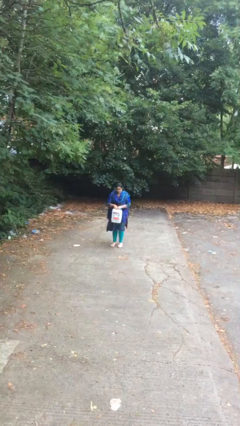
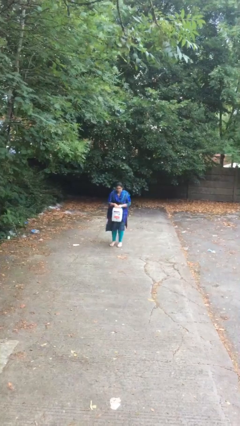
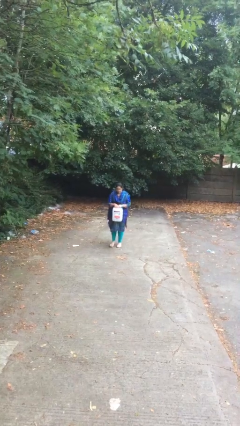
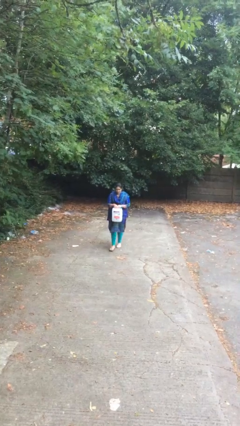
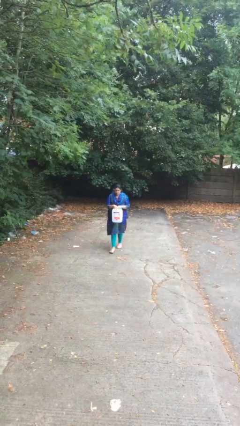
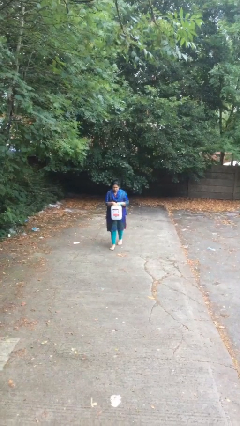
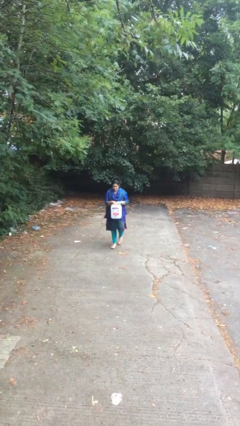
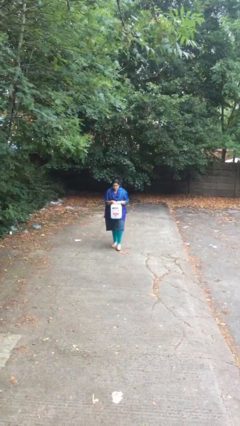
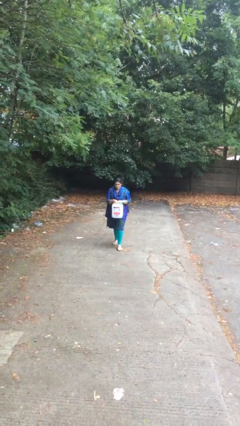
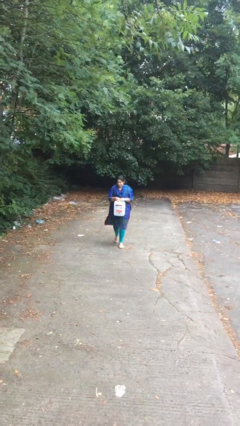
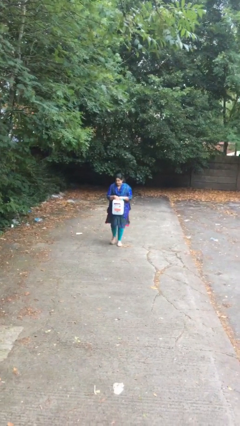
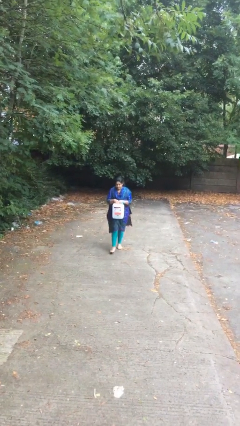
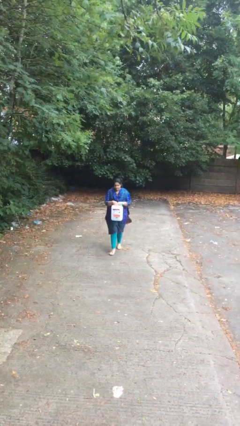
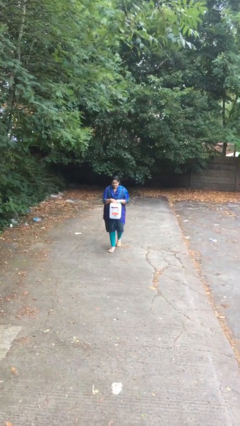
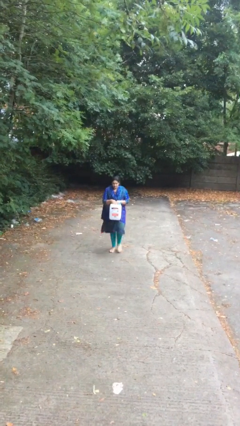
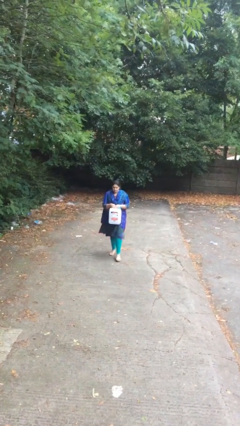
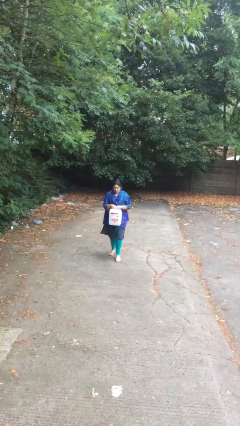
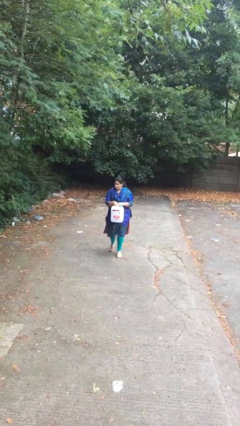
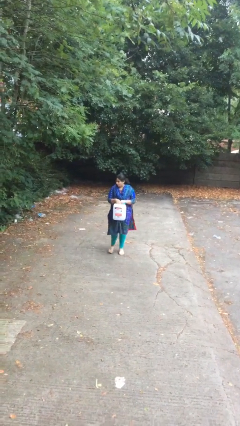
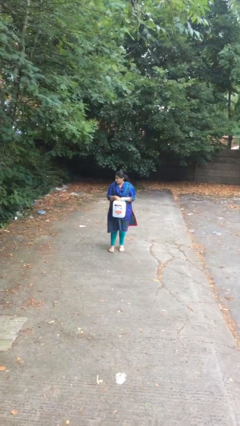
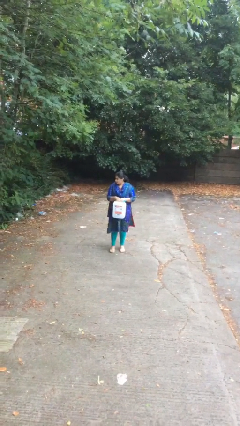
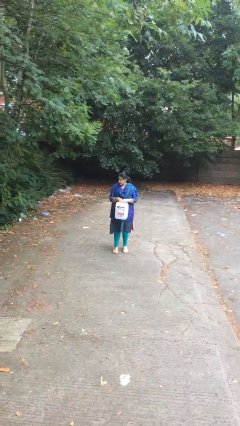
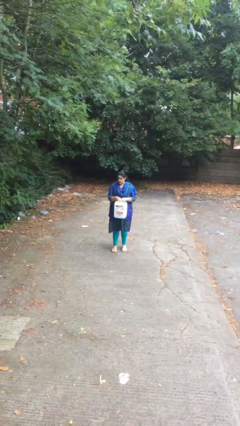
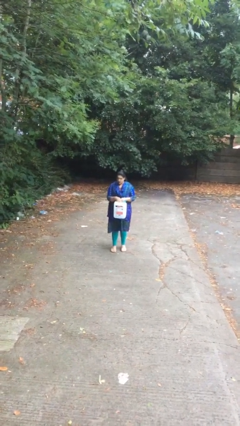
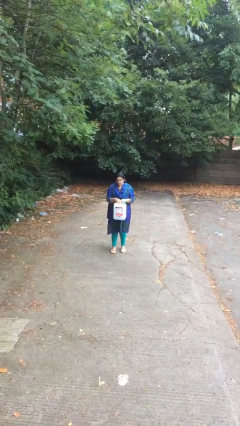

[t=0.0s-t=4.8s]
person carries heavy object

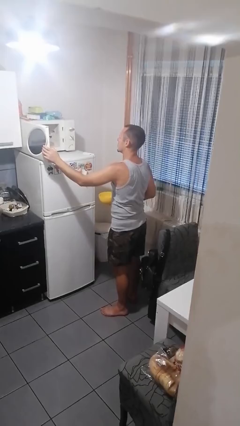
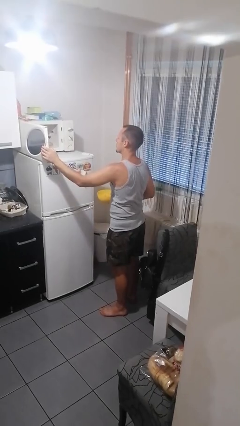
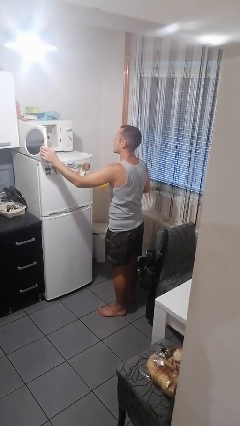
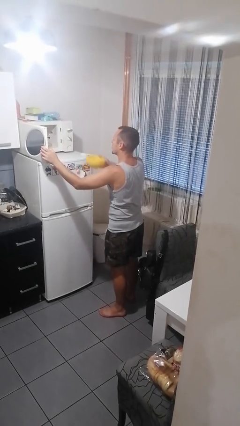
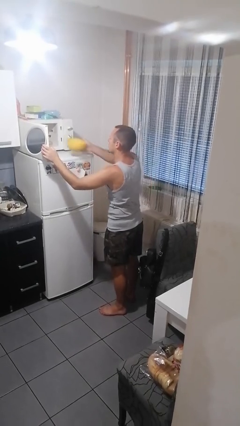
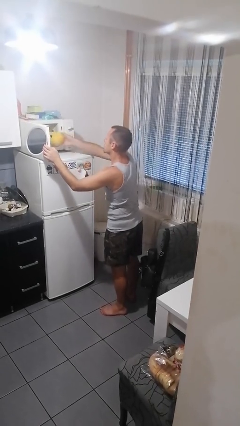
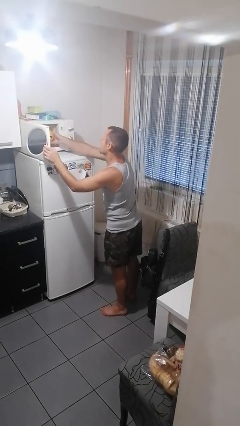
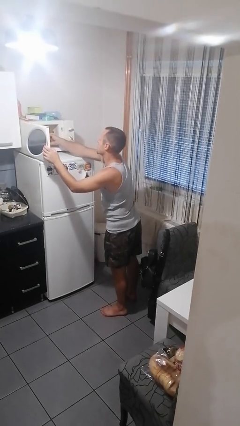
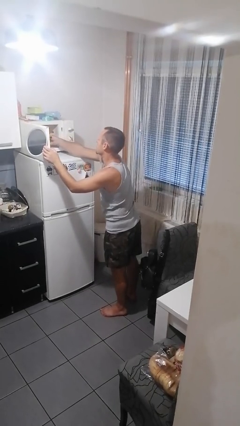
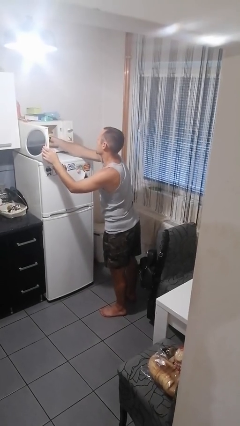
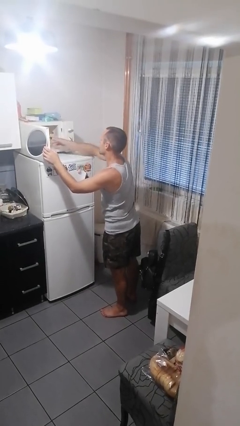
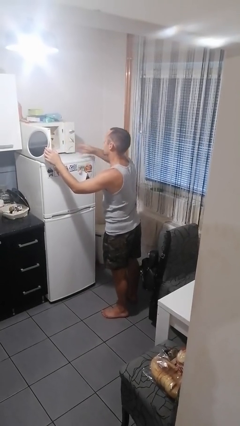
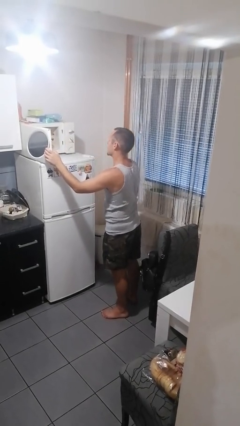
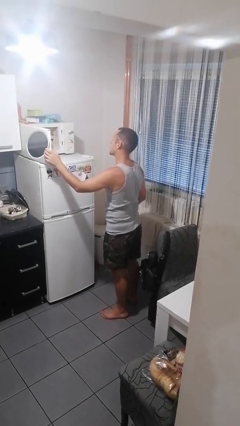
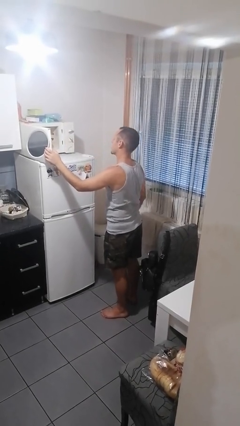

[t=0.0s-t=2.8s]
person puts object into microwave

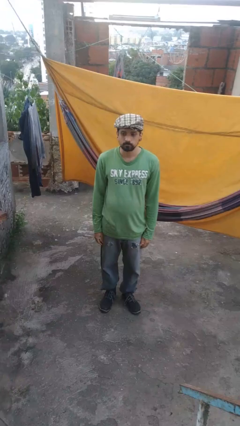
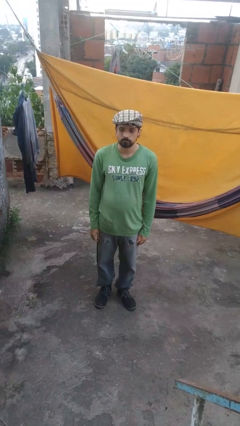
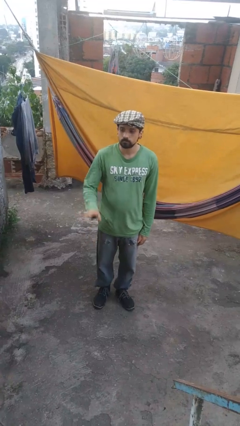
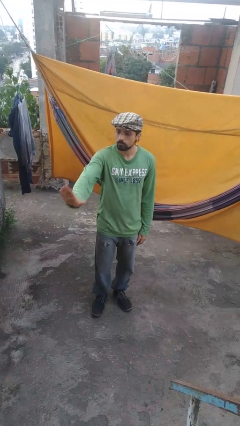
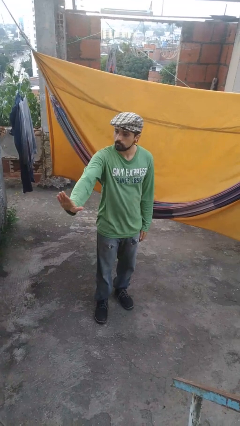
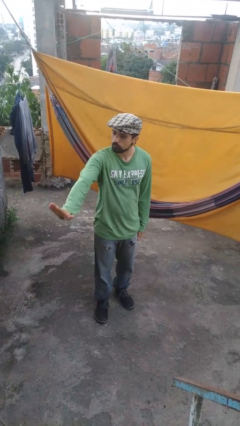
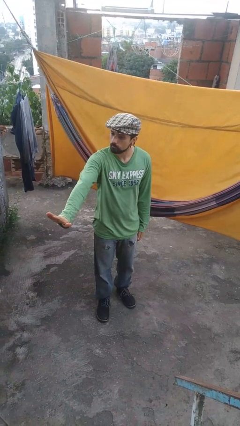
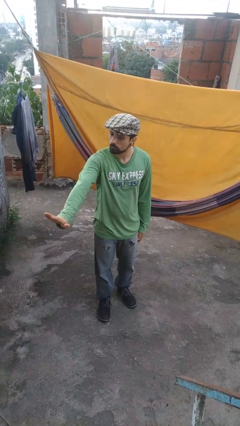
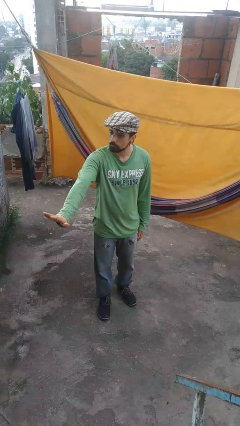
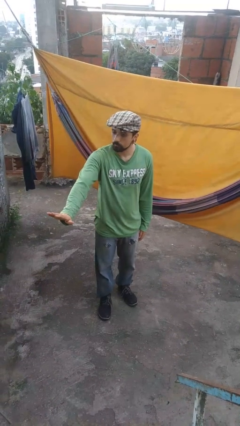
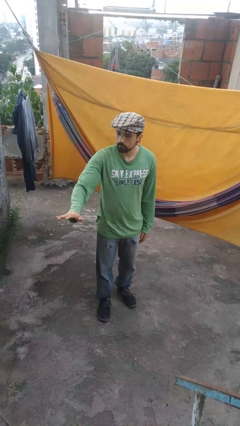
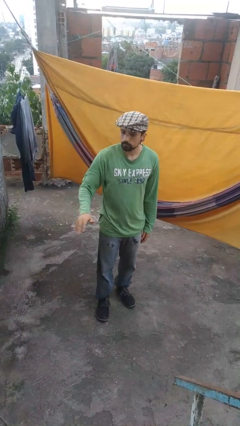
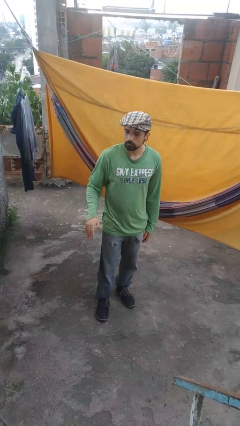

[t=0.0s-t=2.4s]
person gestures stop

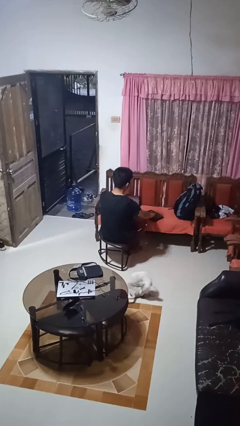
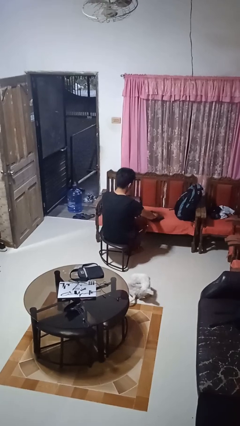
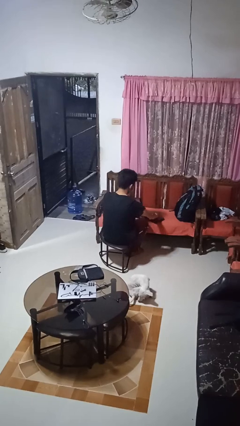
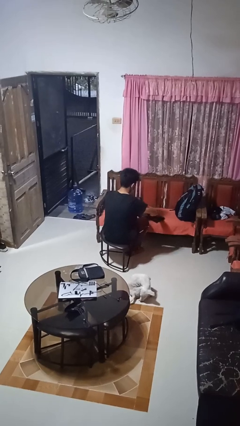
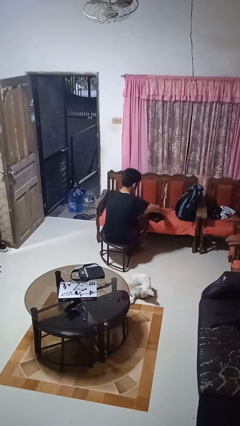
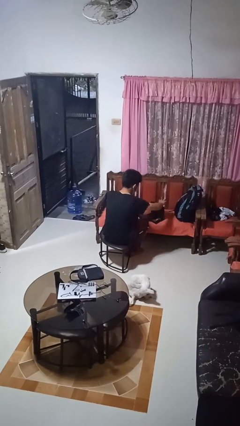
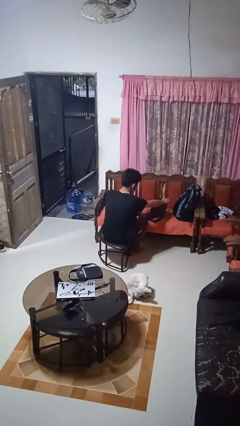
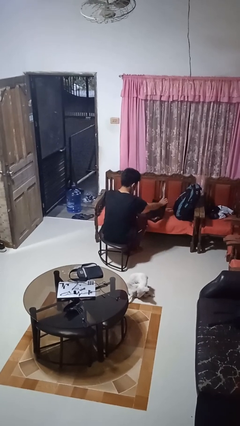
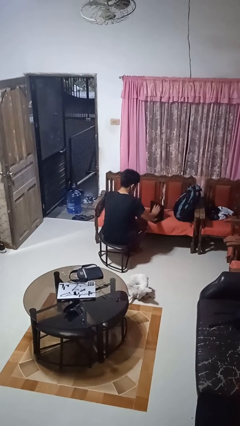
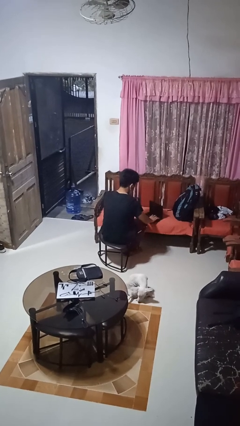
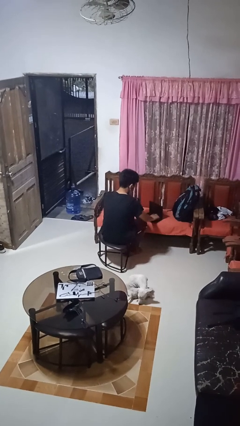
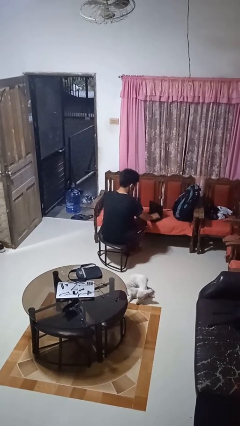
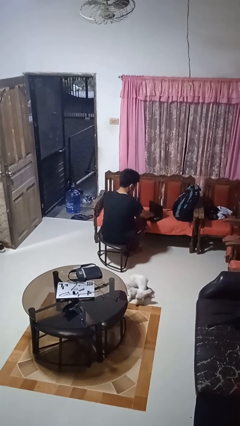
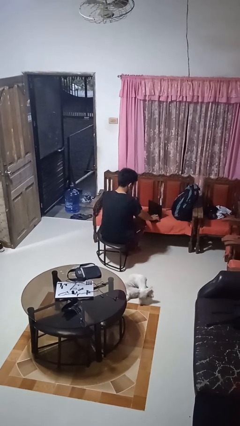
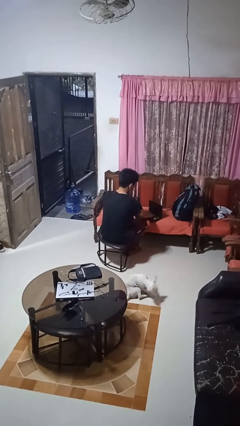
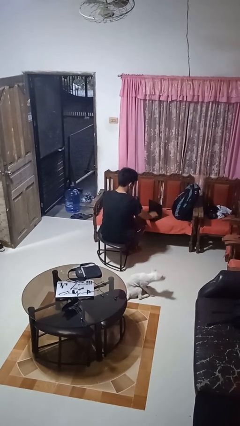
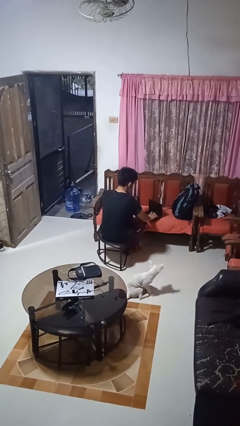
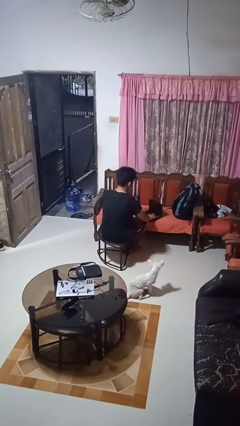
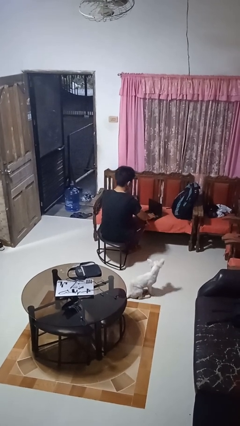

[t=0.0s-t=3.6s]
person opens laptop

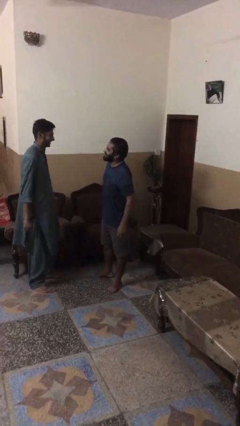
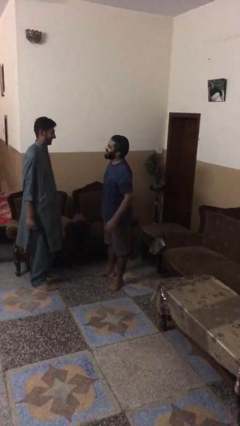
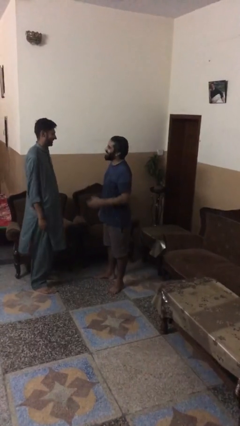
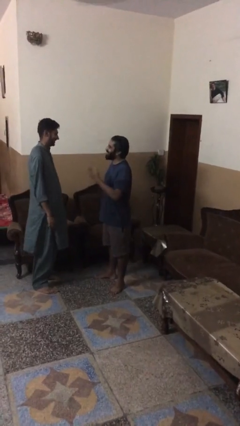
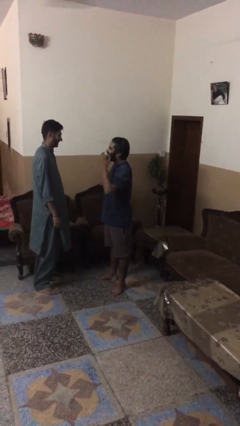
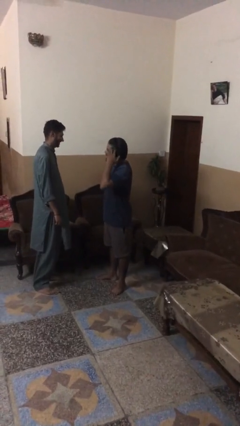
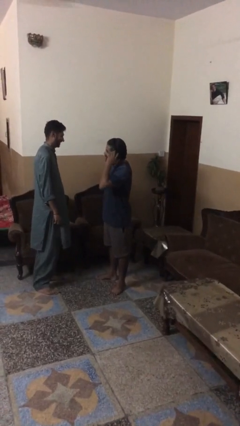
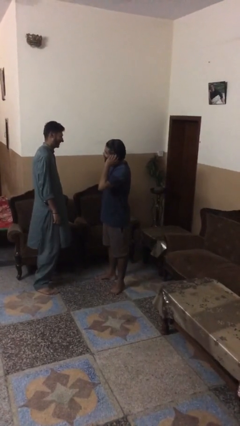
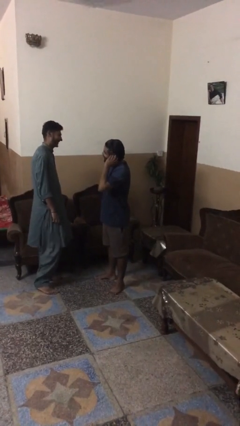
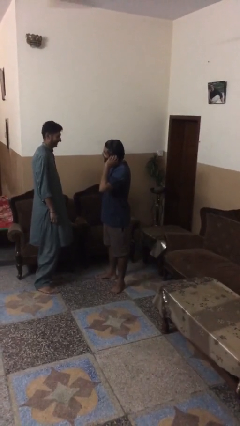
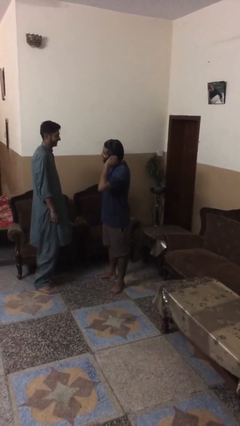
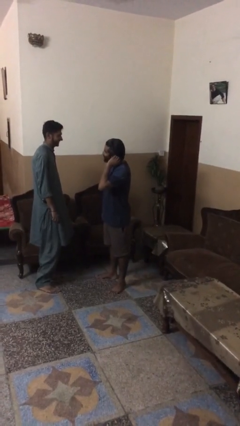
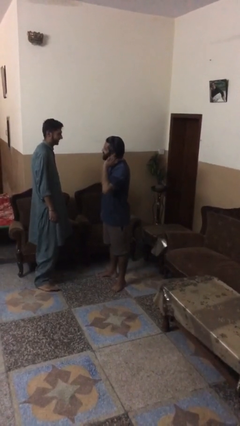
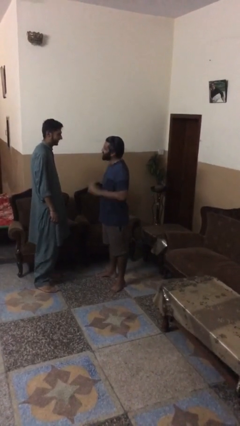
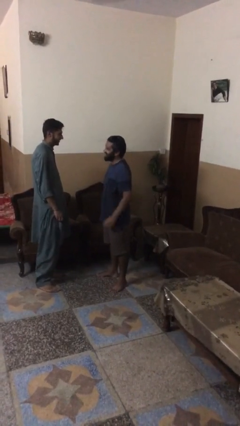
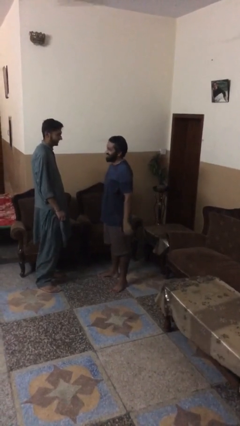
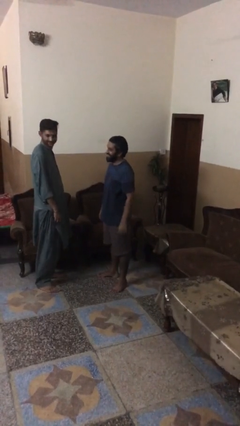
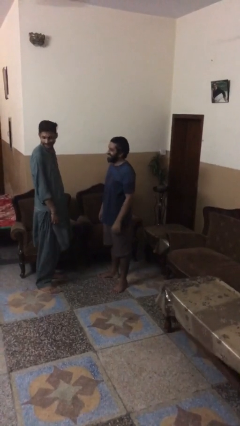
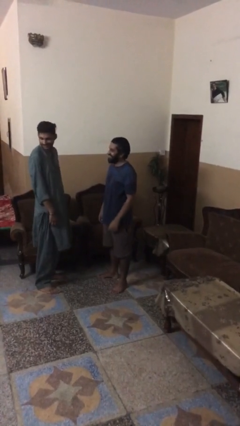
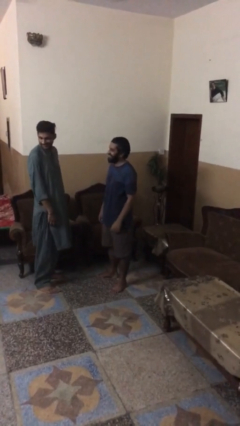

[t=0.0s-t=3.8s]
person talks to person
